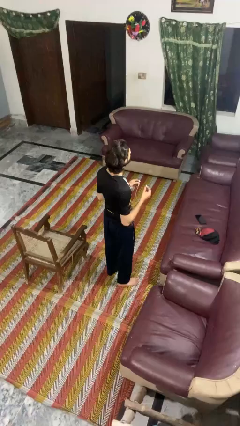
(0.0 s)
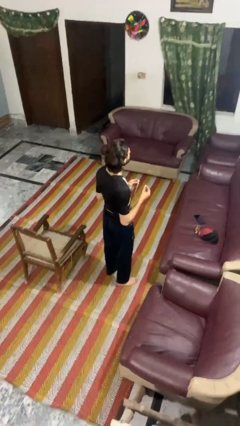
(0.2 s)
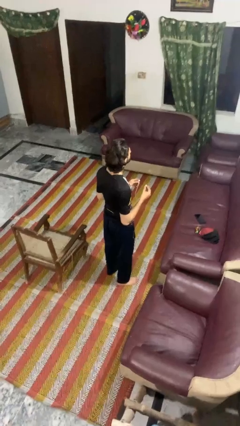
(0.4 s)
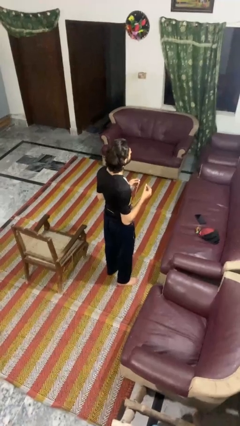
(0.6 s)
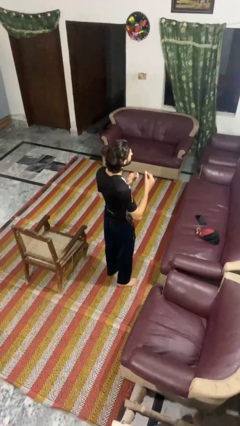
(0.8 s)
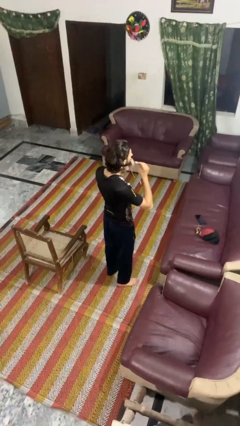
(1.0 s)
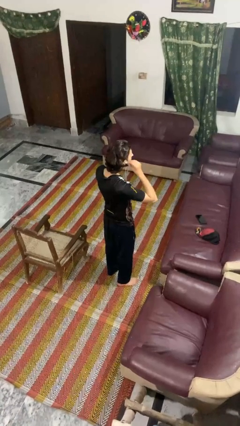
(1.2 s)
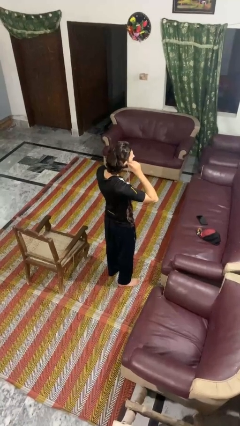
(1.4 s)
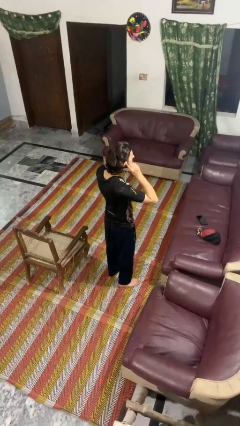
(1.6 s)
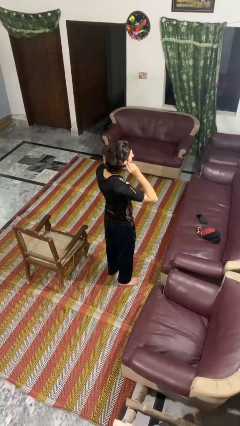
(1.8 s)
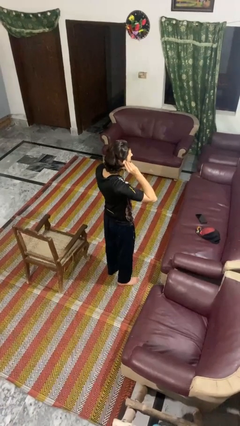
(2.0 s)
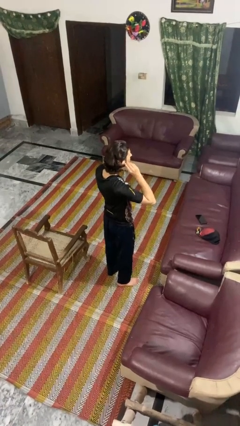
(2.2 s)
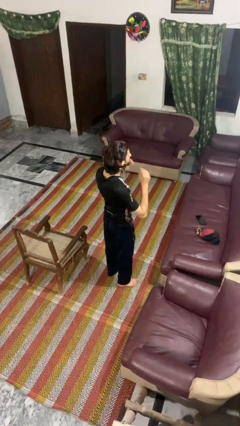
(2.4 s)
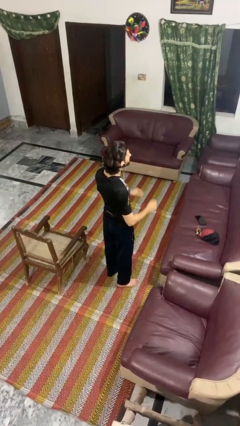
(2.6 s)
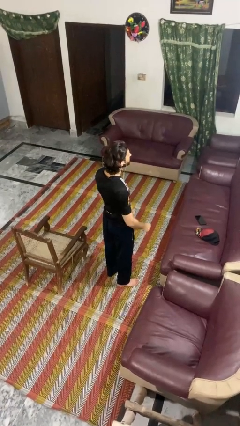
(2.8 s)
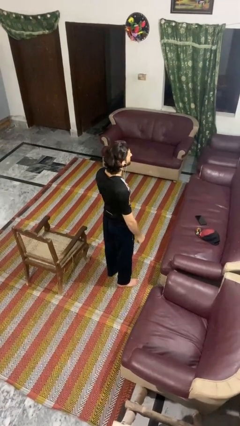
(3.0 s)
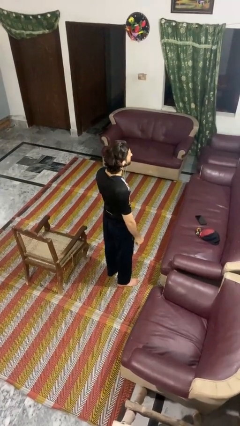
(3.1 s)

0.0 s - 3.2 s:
person puts on headphones

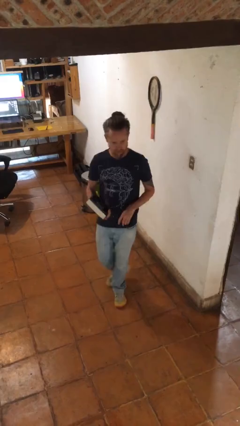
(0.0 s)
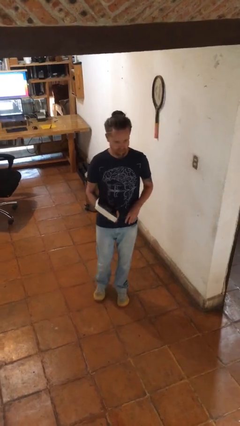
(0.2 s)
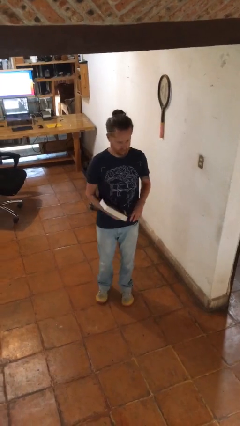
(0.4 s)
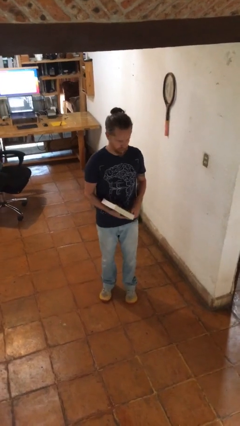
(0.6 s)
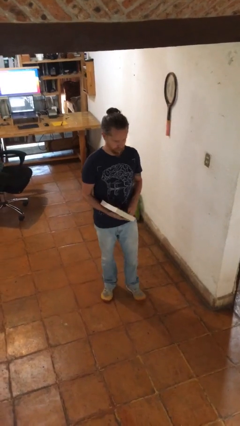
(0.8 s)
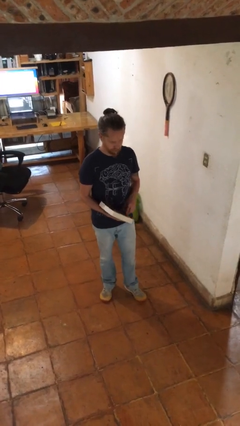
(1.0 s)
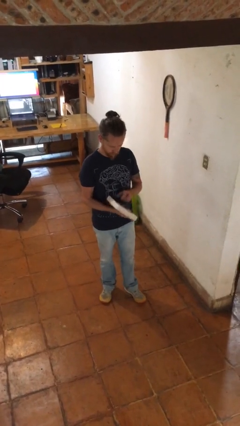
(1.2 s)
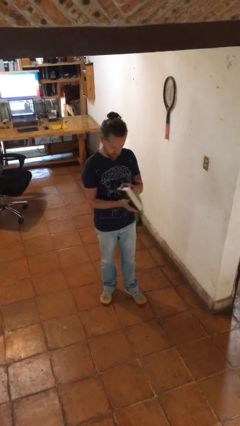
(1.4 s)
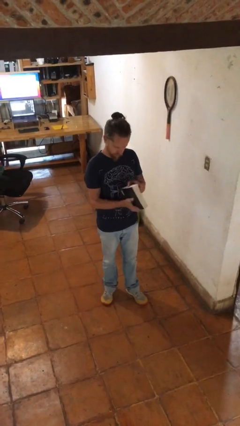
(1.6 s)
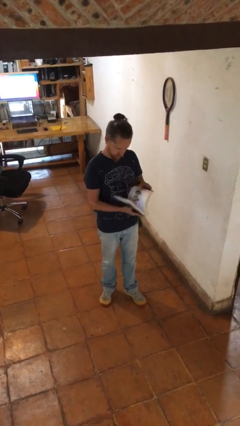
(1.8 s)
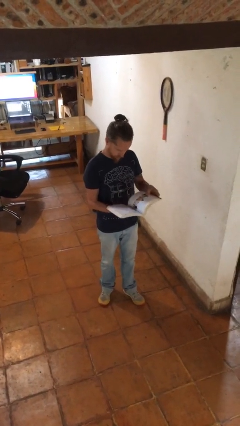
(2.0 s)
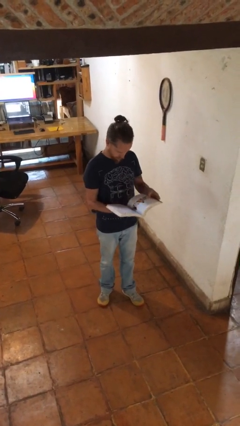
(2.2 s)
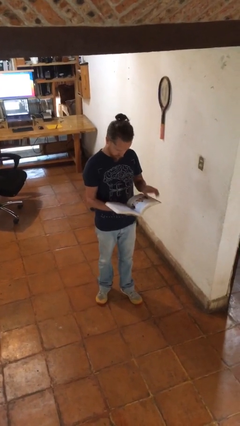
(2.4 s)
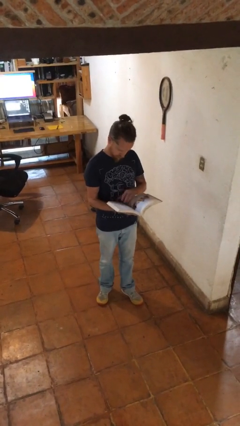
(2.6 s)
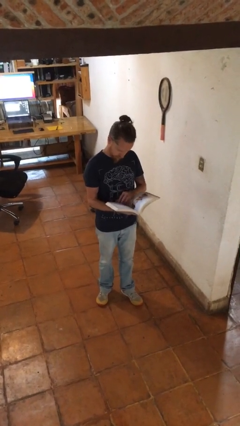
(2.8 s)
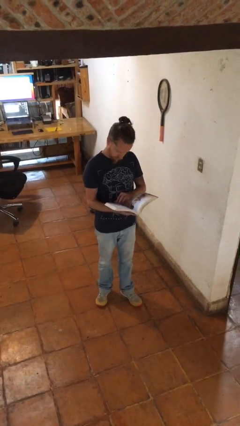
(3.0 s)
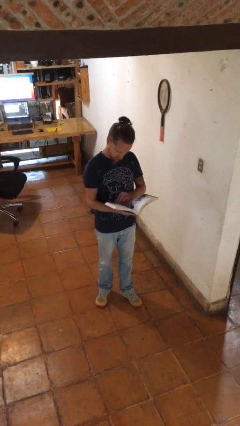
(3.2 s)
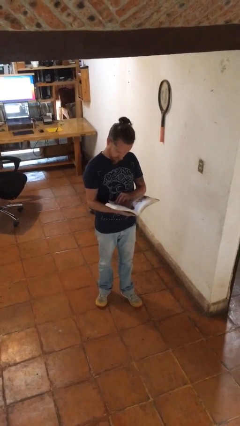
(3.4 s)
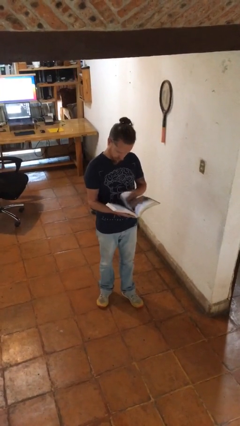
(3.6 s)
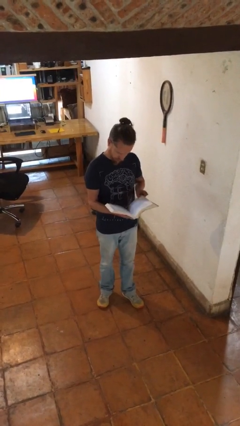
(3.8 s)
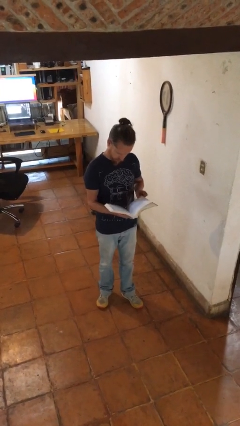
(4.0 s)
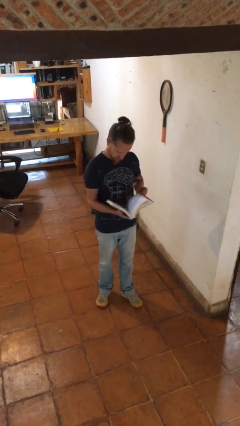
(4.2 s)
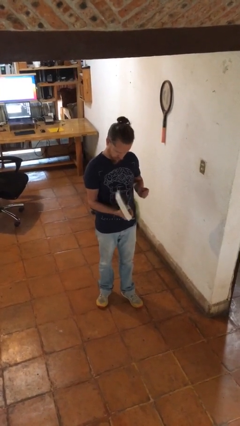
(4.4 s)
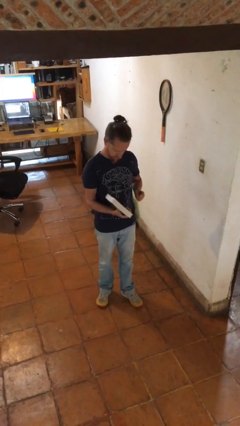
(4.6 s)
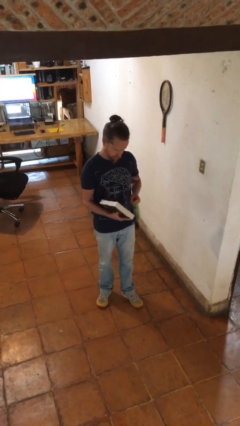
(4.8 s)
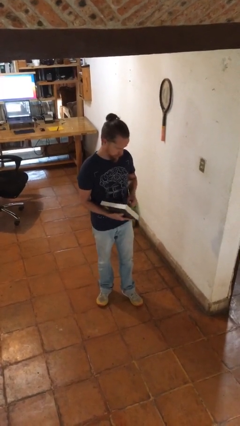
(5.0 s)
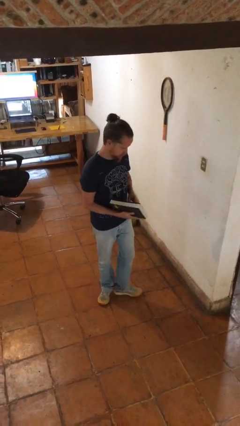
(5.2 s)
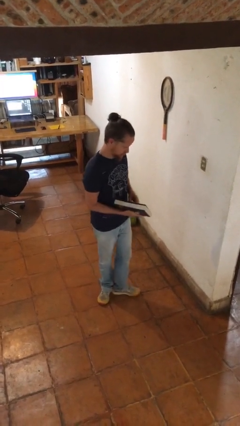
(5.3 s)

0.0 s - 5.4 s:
person reads book

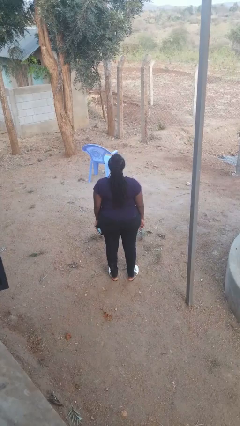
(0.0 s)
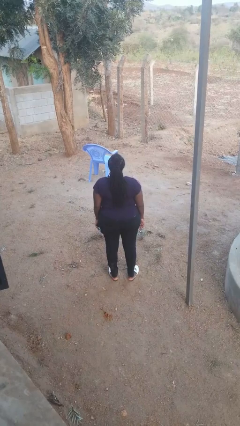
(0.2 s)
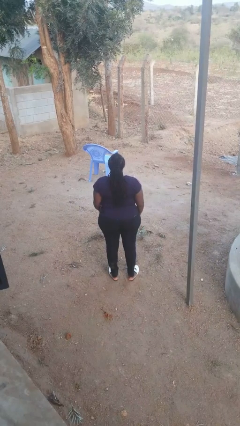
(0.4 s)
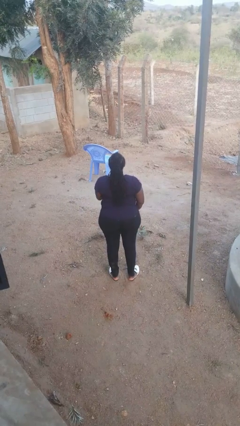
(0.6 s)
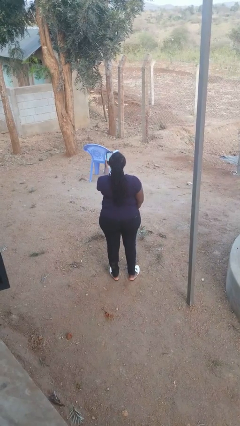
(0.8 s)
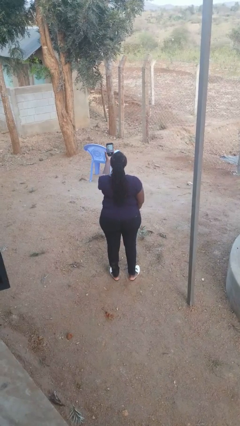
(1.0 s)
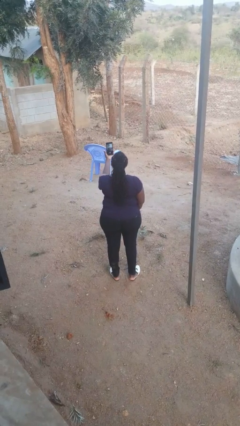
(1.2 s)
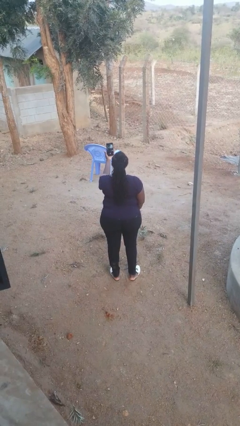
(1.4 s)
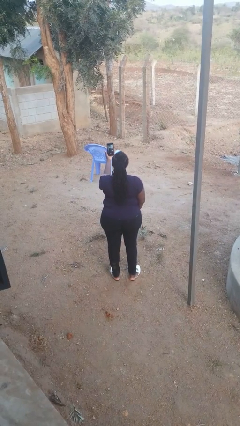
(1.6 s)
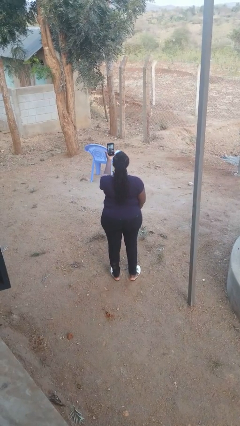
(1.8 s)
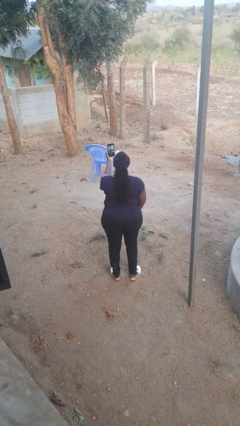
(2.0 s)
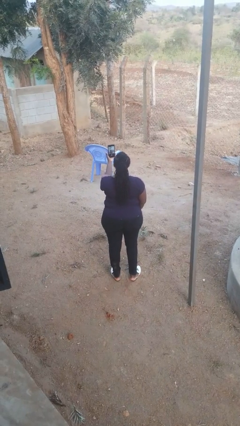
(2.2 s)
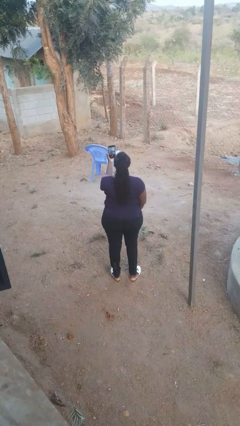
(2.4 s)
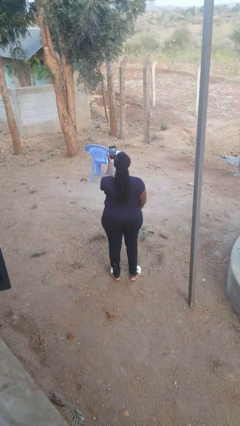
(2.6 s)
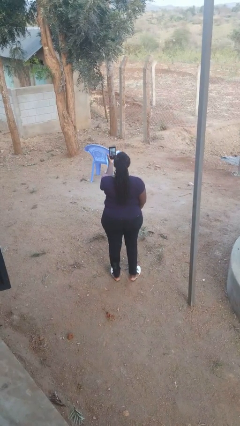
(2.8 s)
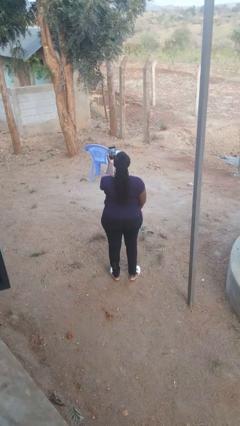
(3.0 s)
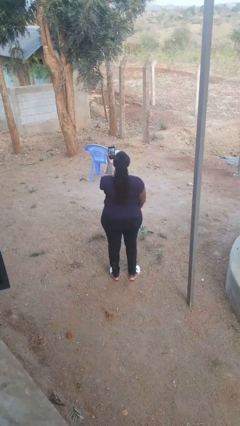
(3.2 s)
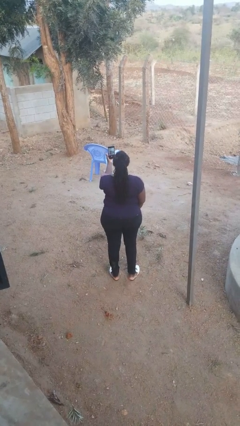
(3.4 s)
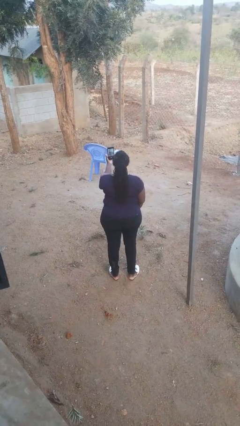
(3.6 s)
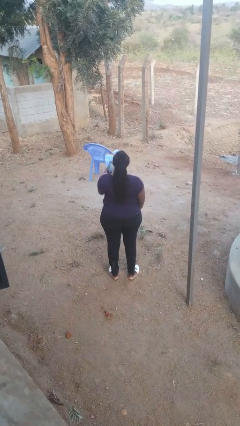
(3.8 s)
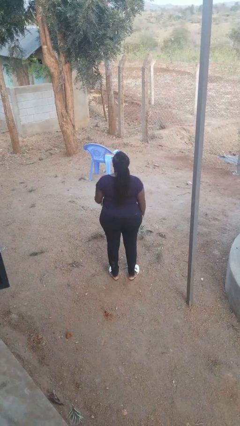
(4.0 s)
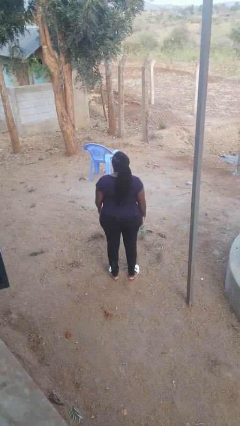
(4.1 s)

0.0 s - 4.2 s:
person takes selfie

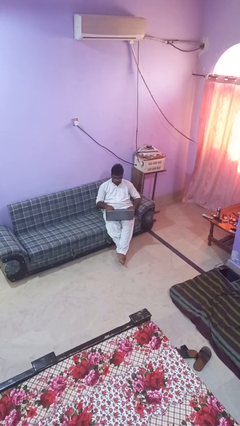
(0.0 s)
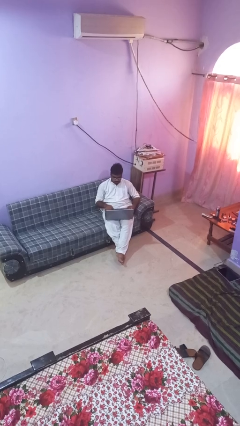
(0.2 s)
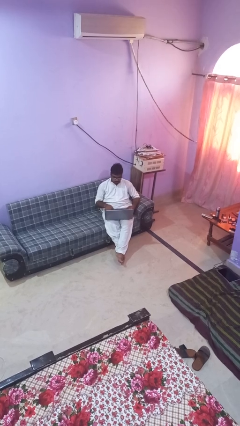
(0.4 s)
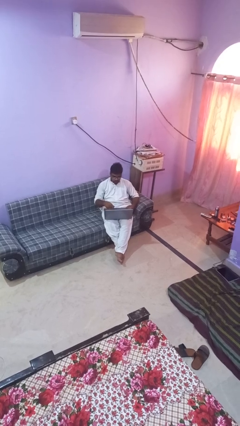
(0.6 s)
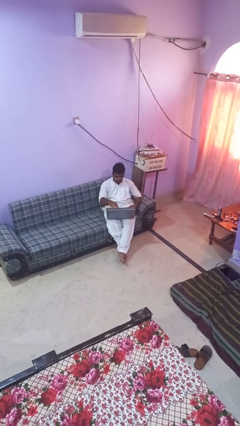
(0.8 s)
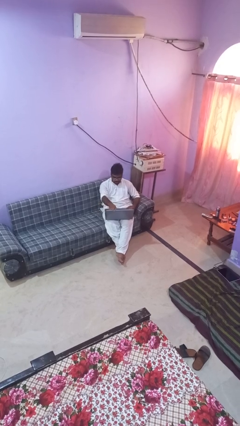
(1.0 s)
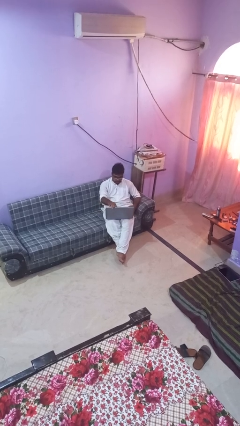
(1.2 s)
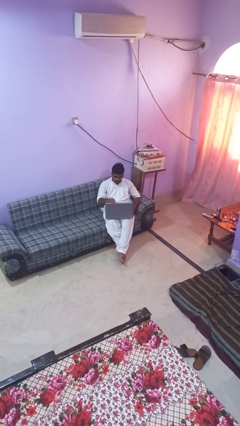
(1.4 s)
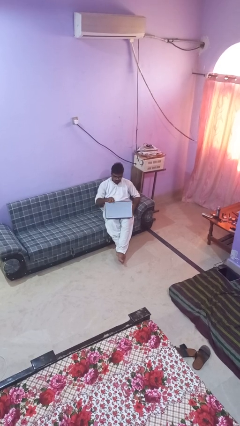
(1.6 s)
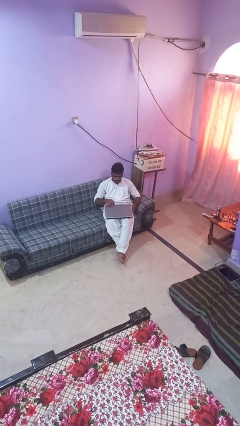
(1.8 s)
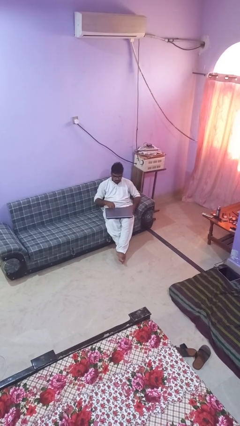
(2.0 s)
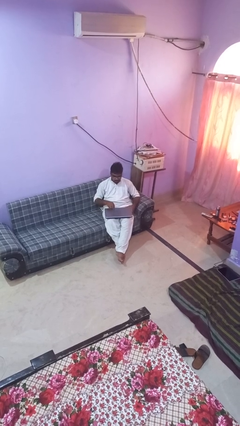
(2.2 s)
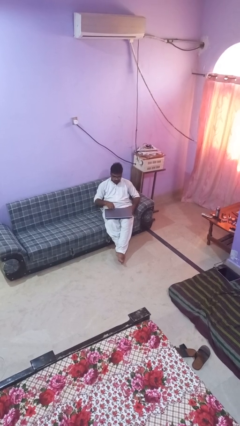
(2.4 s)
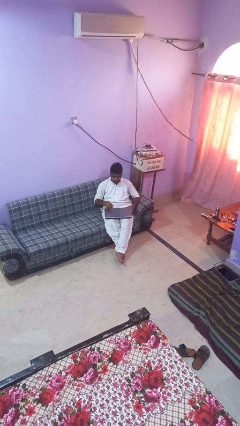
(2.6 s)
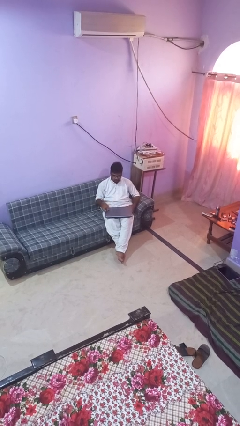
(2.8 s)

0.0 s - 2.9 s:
person closes laptop

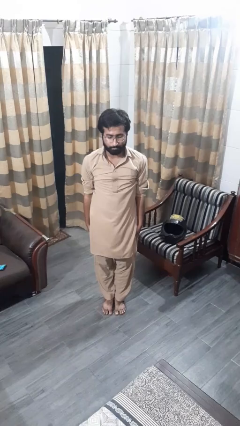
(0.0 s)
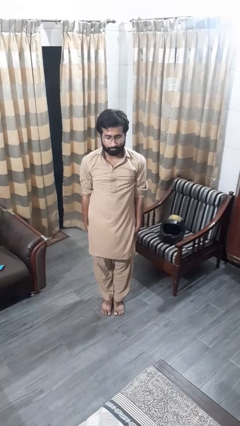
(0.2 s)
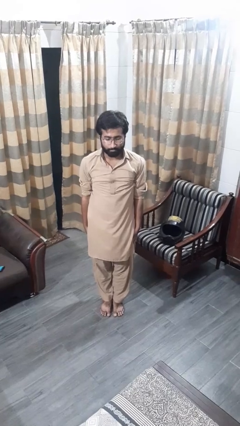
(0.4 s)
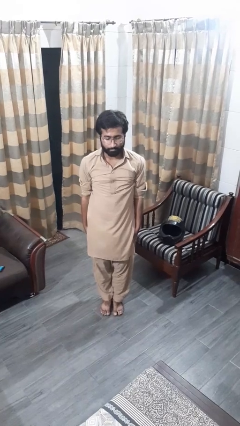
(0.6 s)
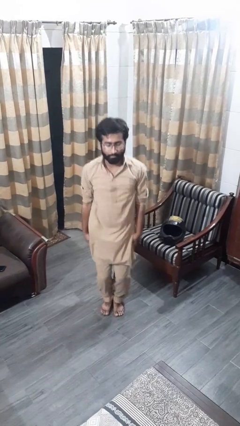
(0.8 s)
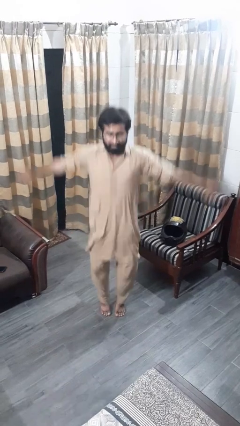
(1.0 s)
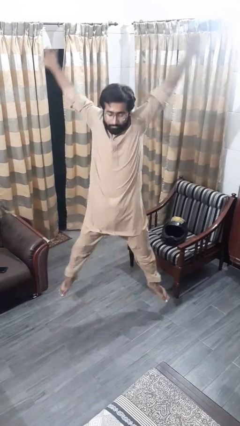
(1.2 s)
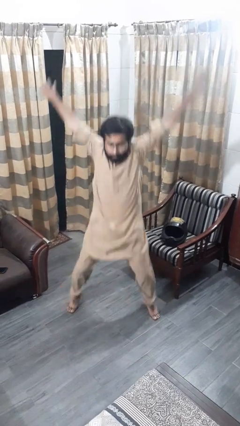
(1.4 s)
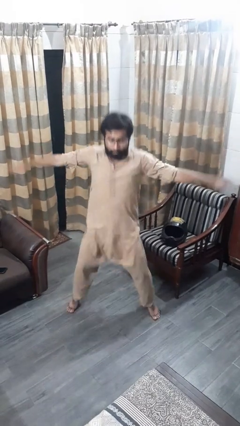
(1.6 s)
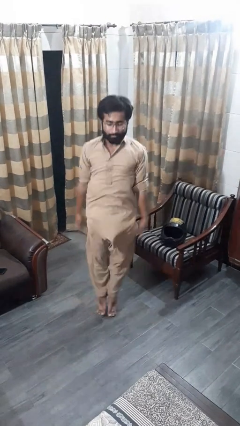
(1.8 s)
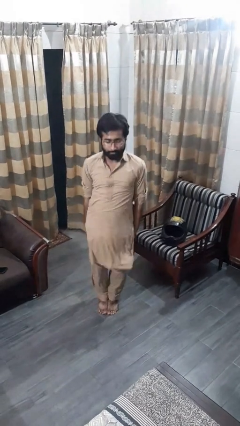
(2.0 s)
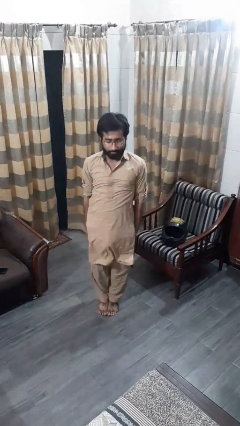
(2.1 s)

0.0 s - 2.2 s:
person exercises with jumping jacks
